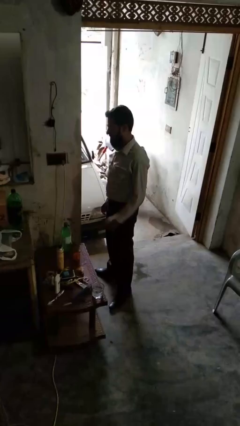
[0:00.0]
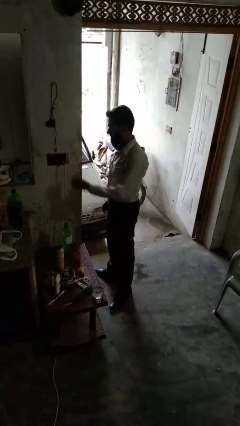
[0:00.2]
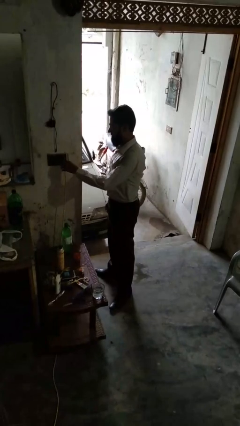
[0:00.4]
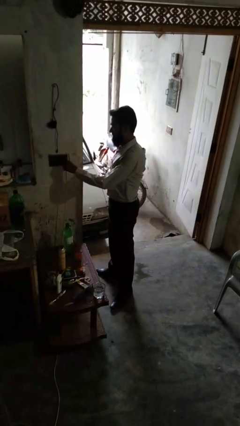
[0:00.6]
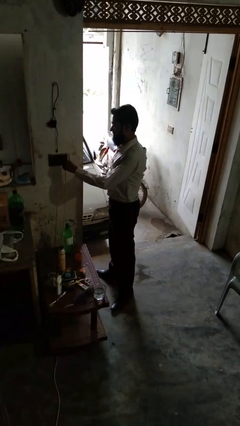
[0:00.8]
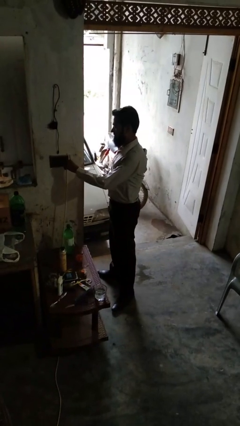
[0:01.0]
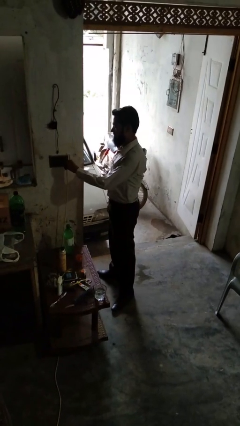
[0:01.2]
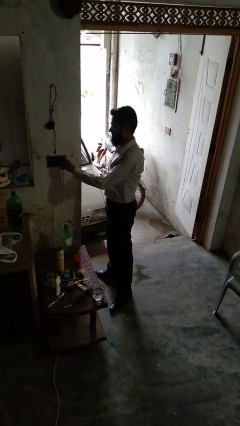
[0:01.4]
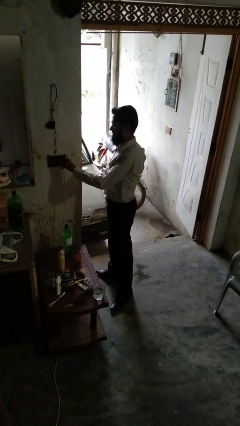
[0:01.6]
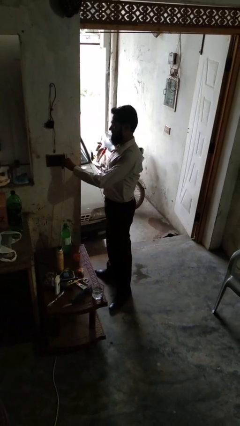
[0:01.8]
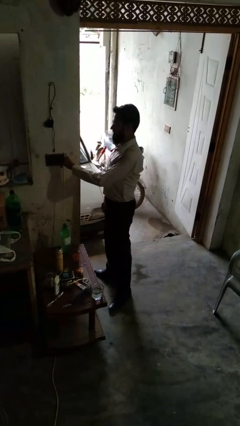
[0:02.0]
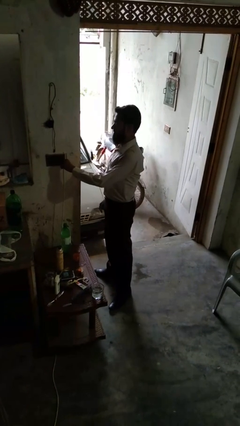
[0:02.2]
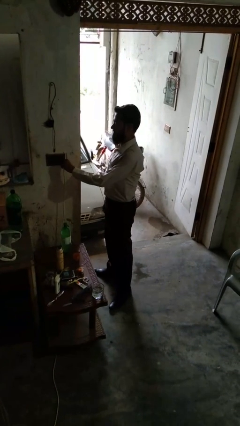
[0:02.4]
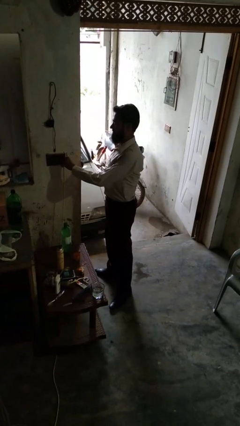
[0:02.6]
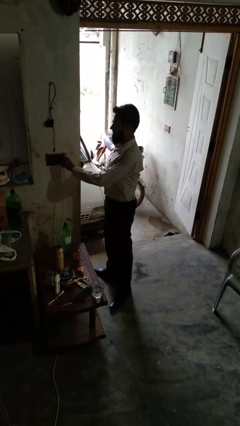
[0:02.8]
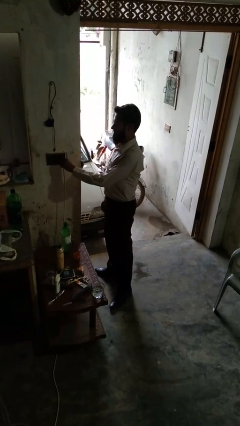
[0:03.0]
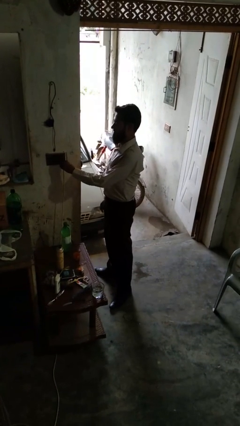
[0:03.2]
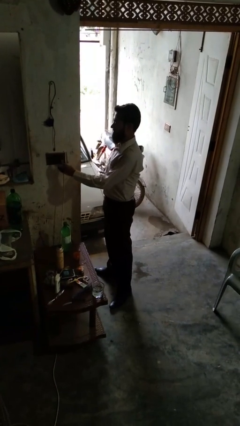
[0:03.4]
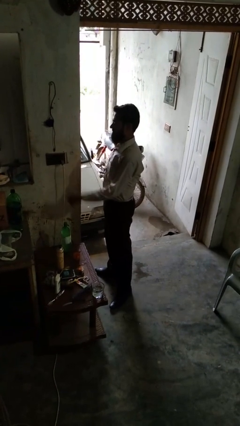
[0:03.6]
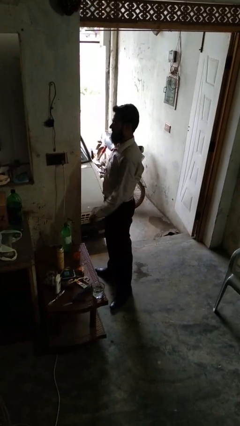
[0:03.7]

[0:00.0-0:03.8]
person plugs into electrical socket

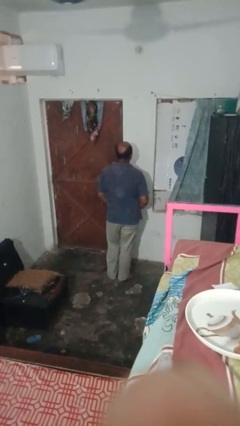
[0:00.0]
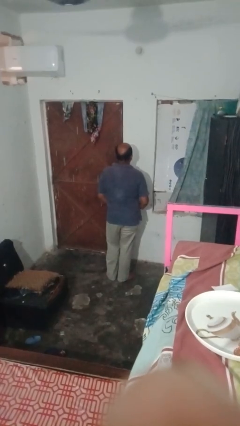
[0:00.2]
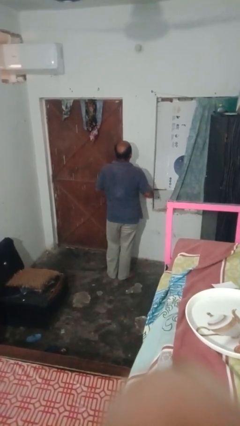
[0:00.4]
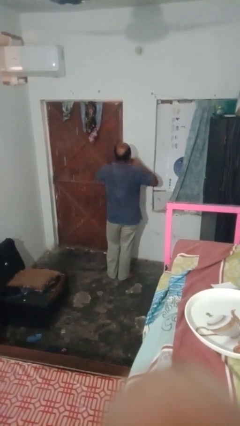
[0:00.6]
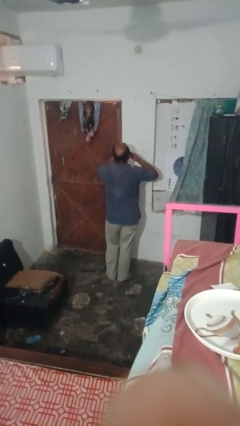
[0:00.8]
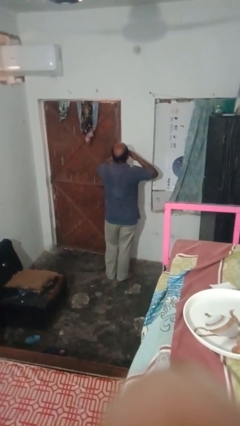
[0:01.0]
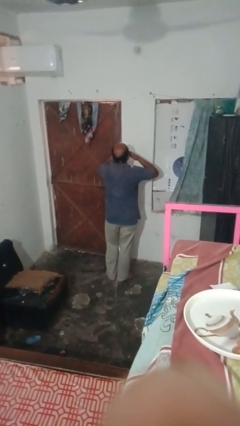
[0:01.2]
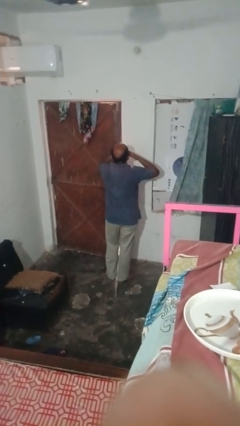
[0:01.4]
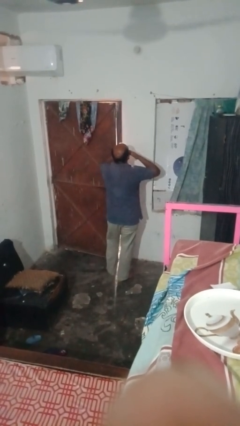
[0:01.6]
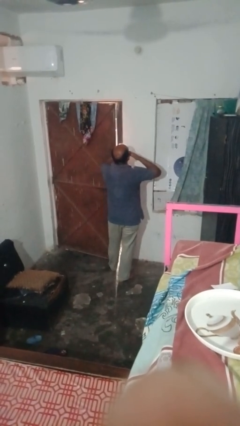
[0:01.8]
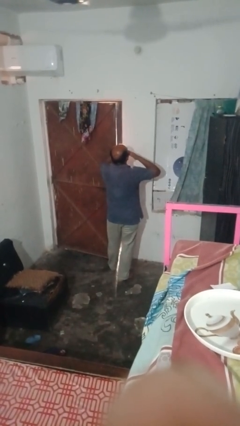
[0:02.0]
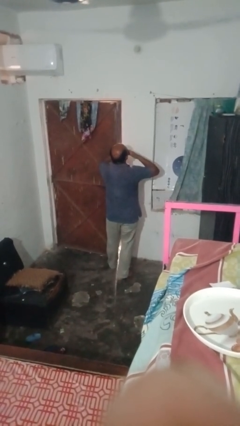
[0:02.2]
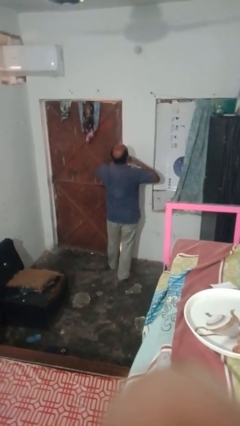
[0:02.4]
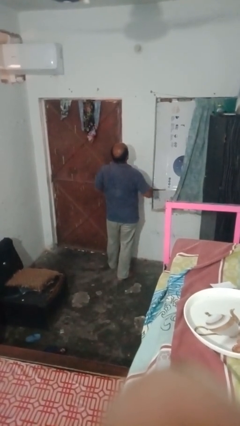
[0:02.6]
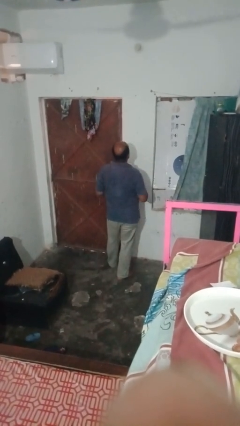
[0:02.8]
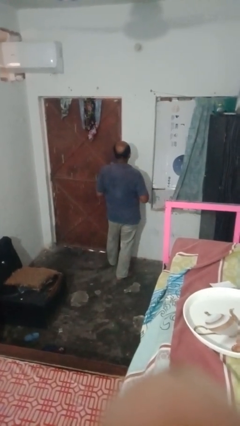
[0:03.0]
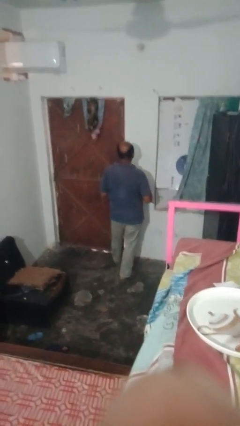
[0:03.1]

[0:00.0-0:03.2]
person yawns

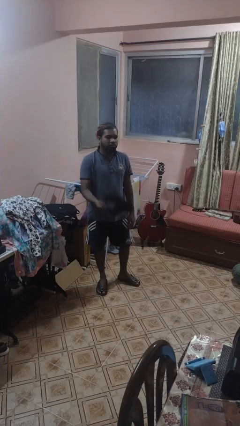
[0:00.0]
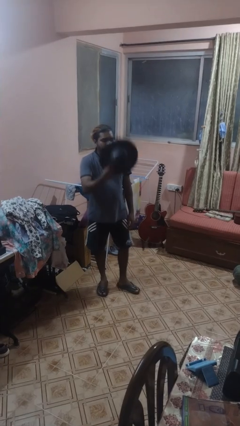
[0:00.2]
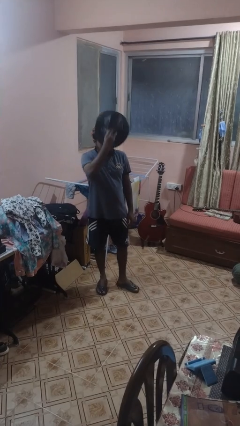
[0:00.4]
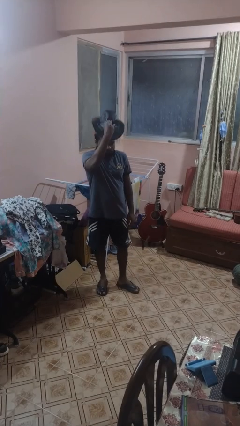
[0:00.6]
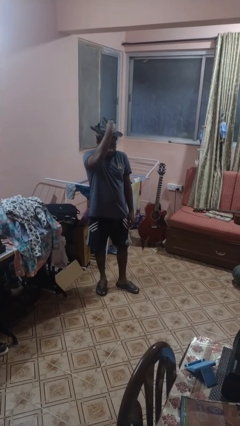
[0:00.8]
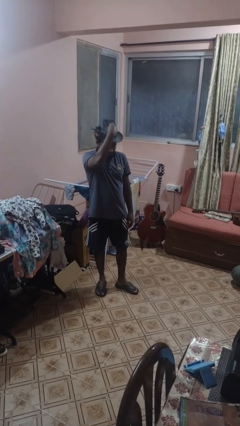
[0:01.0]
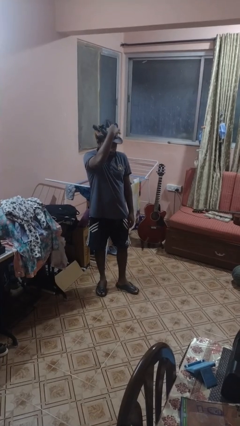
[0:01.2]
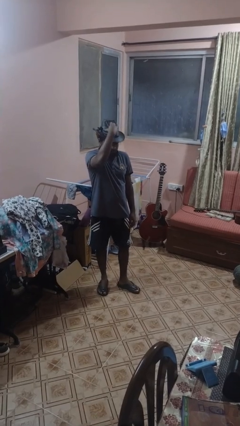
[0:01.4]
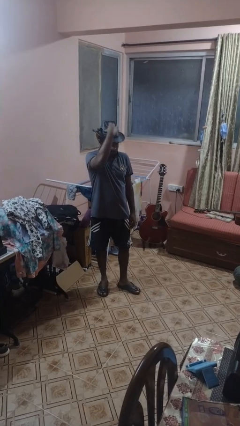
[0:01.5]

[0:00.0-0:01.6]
person puts on hat

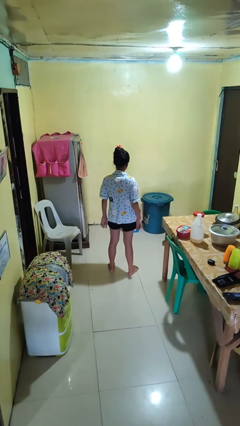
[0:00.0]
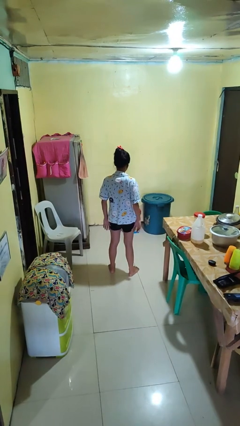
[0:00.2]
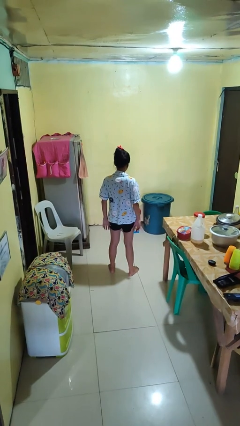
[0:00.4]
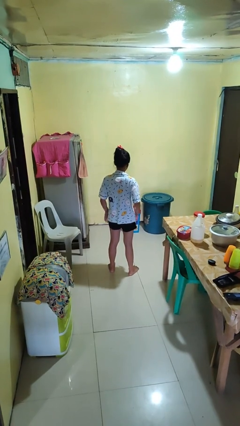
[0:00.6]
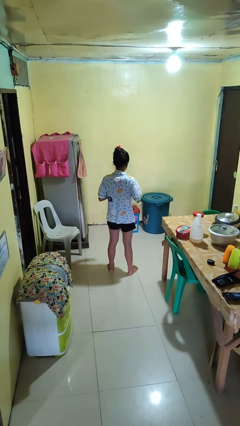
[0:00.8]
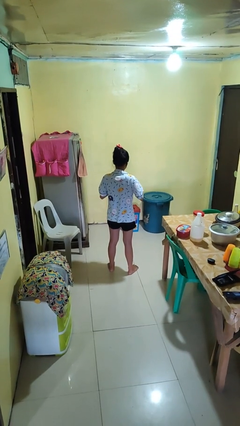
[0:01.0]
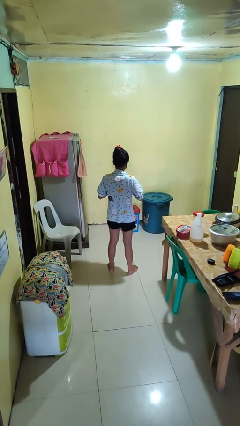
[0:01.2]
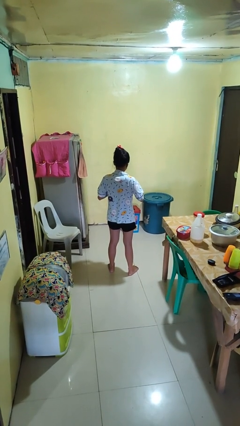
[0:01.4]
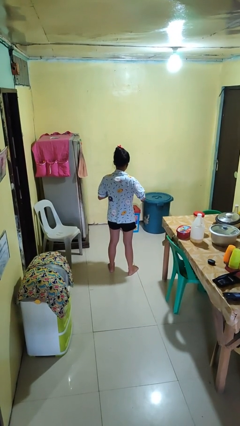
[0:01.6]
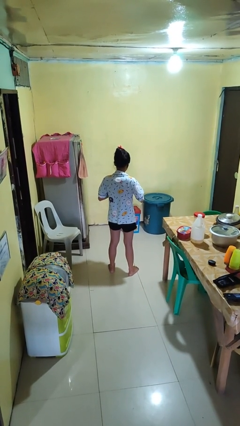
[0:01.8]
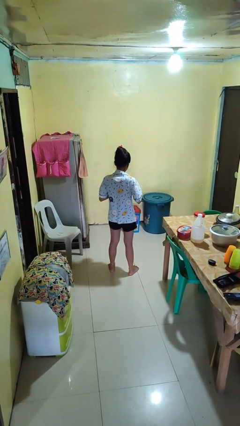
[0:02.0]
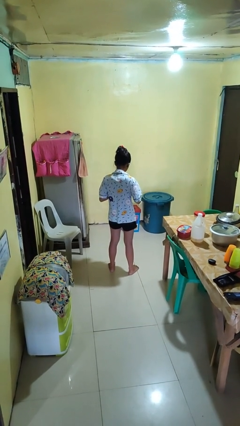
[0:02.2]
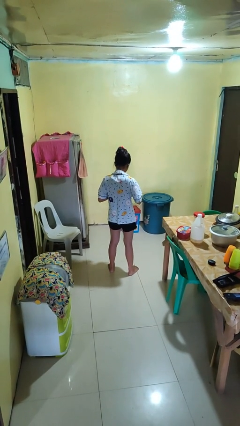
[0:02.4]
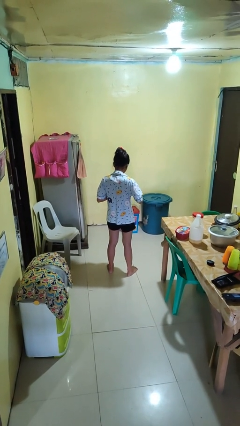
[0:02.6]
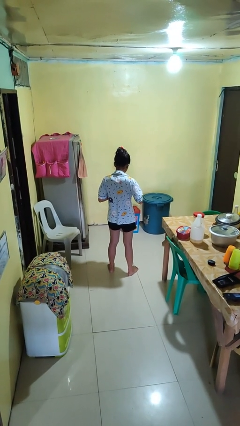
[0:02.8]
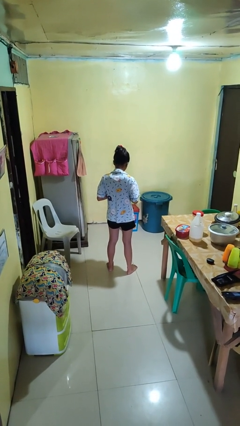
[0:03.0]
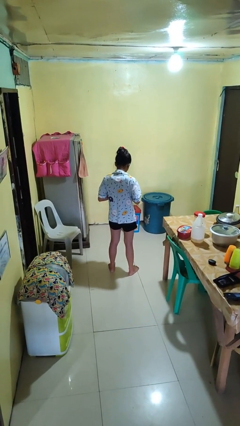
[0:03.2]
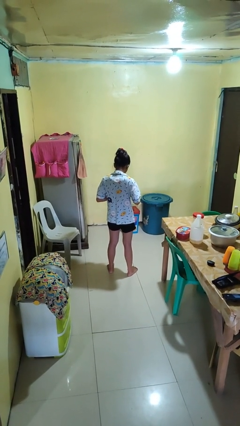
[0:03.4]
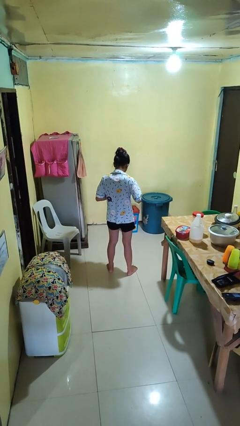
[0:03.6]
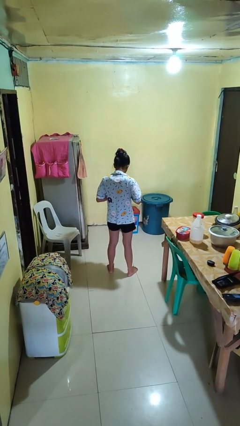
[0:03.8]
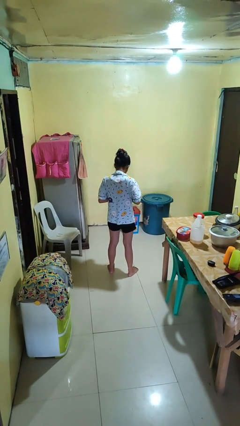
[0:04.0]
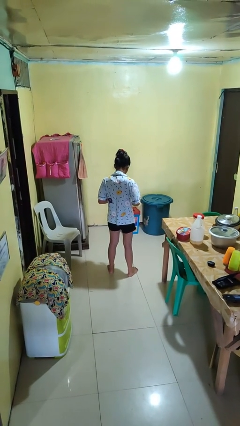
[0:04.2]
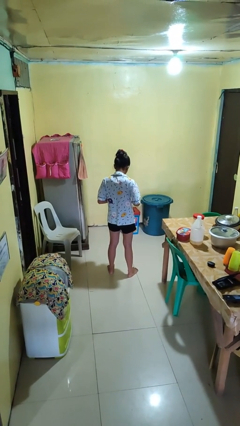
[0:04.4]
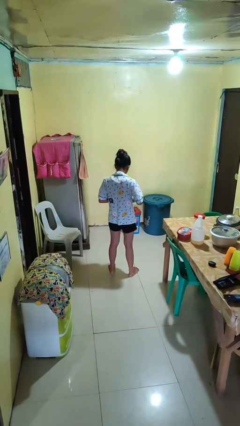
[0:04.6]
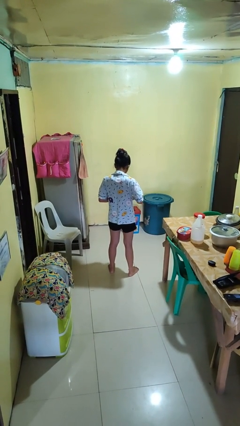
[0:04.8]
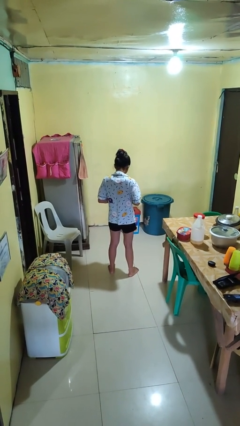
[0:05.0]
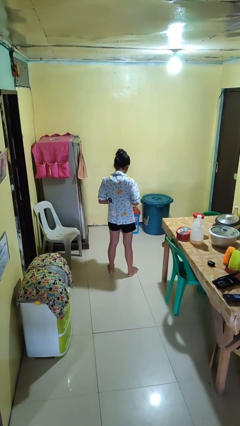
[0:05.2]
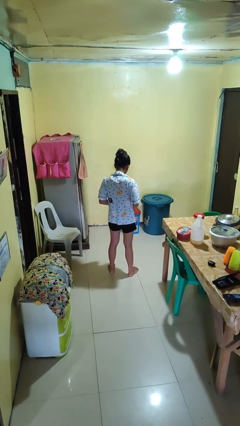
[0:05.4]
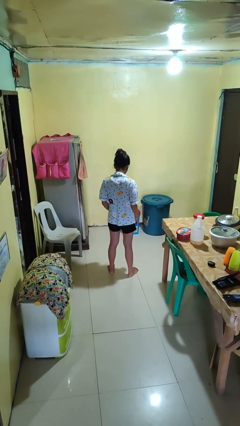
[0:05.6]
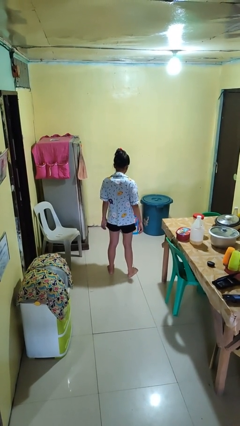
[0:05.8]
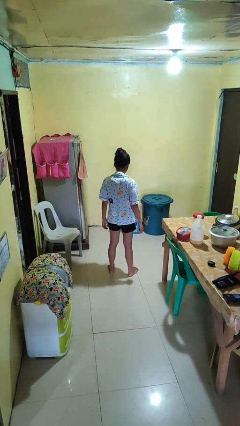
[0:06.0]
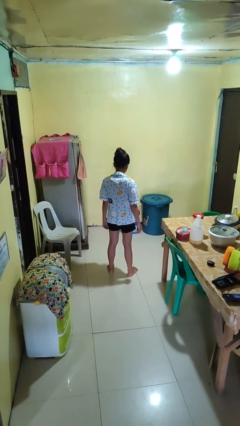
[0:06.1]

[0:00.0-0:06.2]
person unbuttons shirt

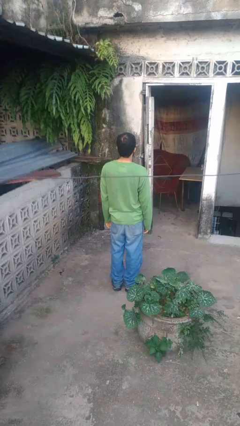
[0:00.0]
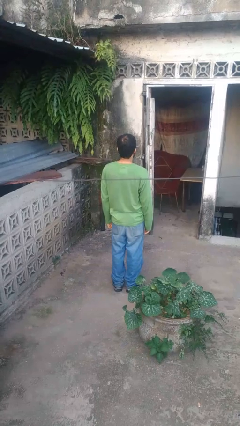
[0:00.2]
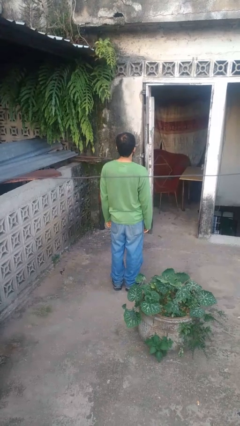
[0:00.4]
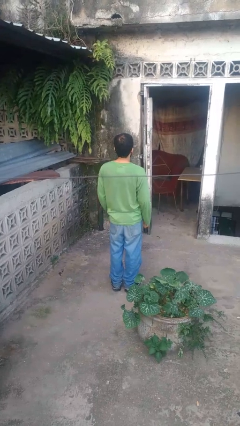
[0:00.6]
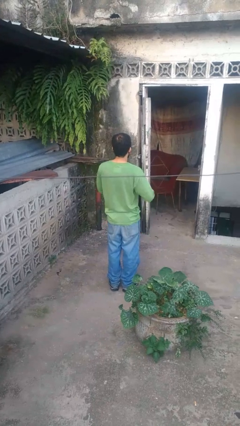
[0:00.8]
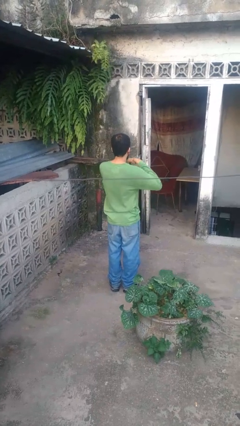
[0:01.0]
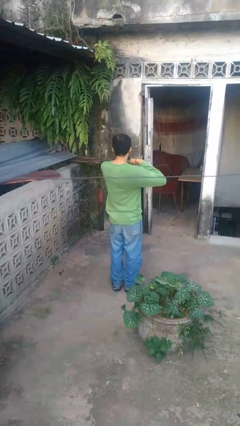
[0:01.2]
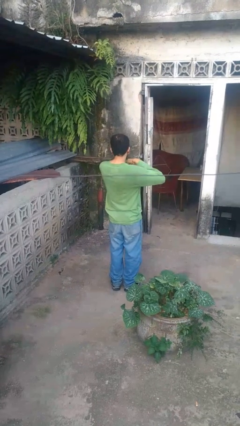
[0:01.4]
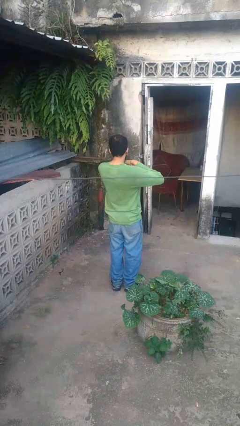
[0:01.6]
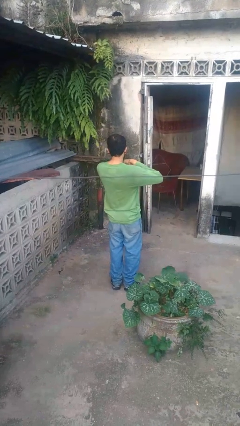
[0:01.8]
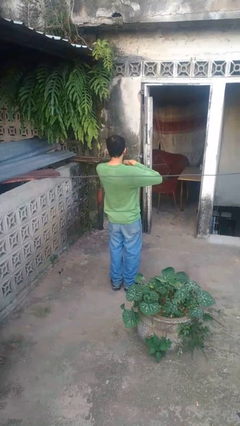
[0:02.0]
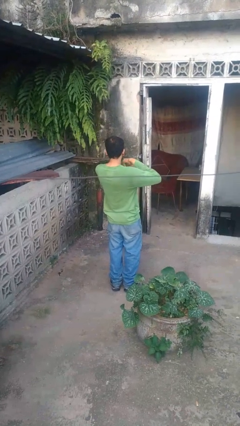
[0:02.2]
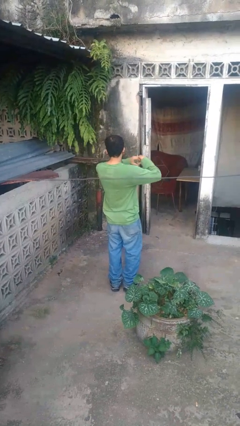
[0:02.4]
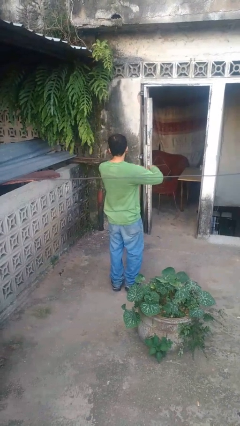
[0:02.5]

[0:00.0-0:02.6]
person gestures heart

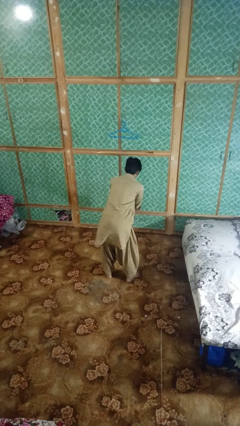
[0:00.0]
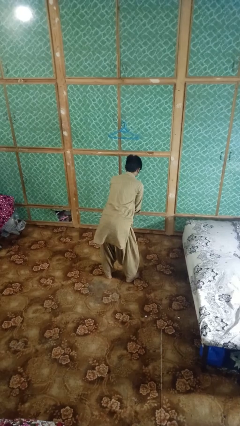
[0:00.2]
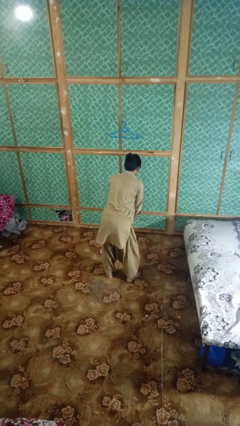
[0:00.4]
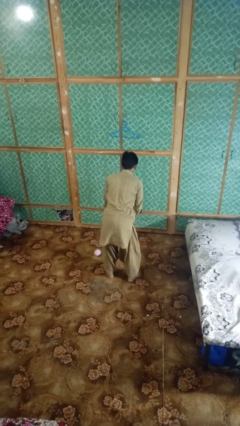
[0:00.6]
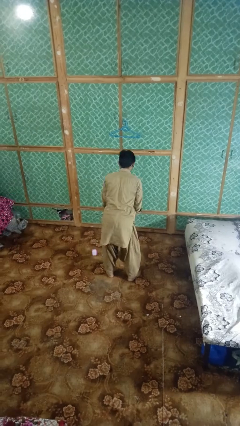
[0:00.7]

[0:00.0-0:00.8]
person catches dropped object
